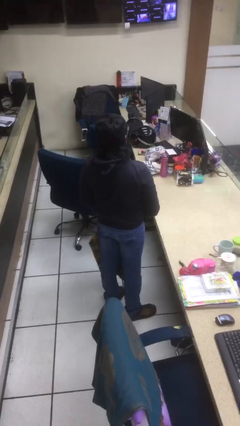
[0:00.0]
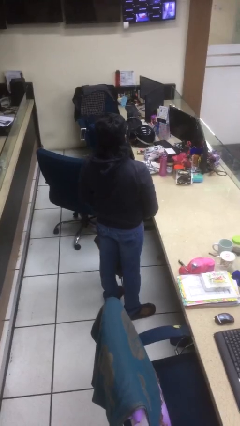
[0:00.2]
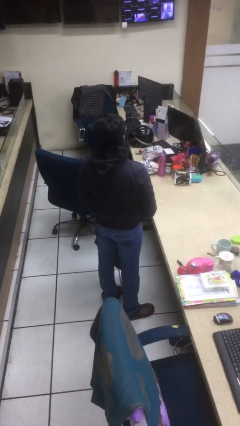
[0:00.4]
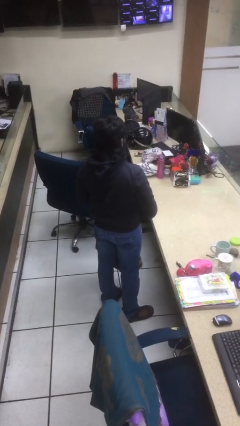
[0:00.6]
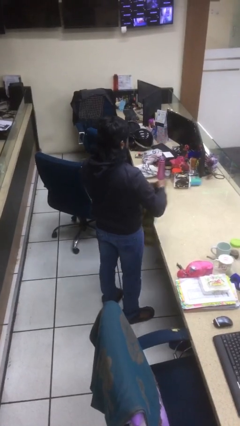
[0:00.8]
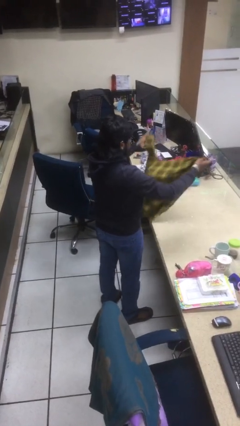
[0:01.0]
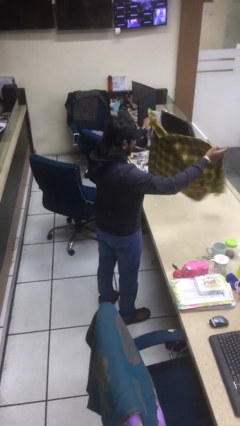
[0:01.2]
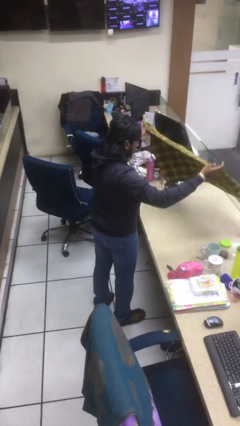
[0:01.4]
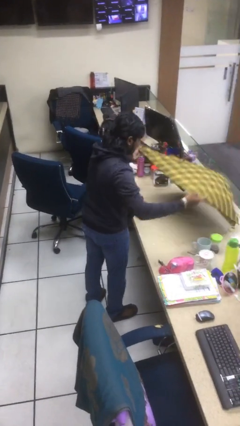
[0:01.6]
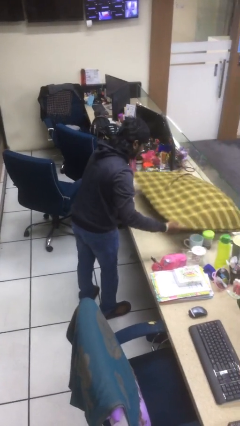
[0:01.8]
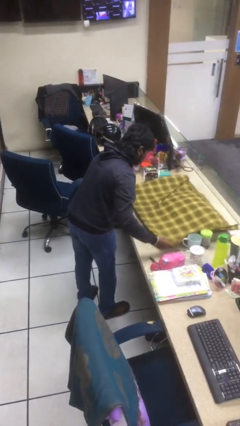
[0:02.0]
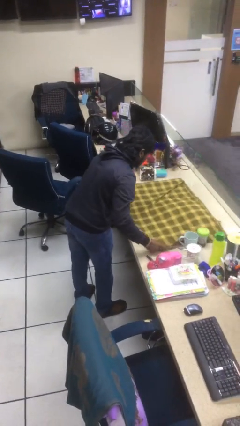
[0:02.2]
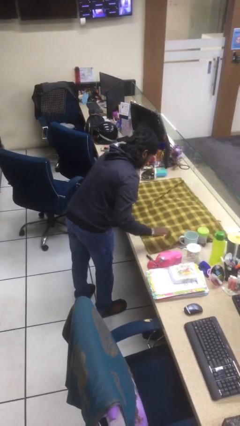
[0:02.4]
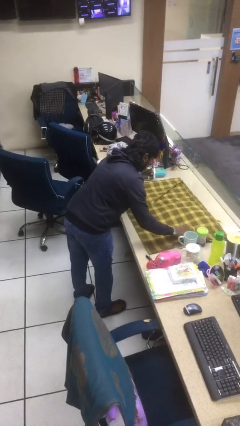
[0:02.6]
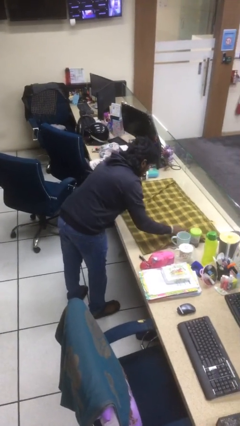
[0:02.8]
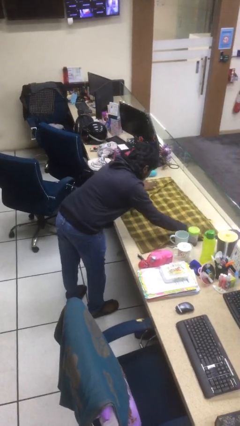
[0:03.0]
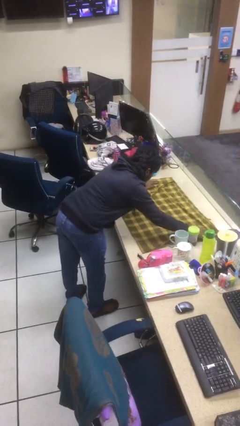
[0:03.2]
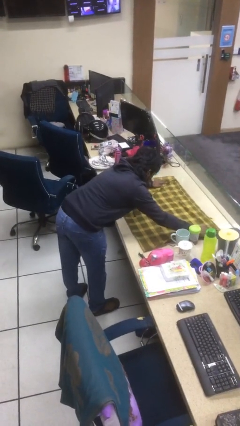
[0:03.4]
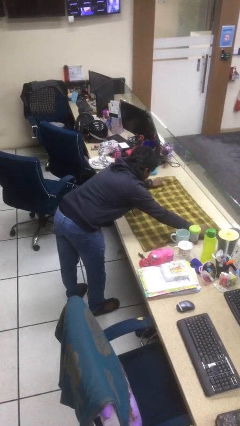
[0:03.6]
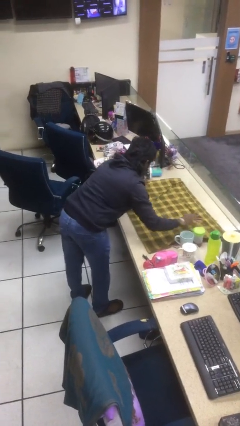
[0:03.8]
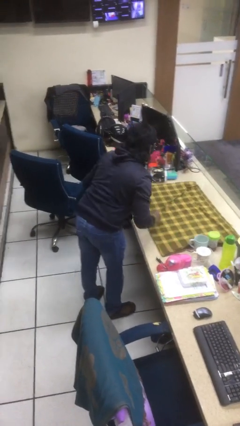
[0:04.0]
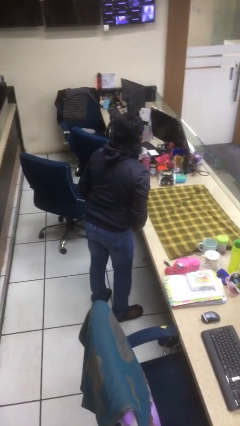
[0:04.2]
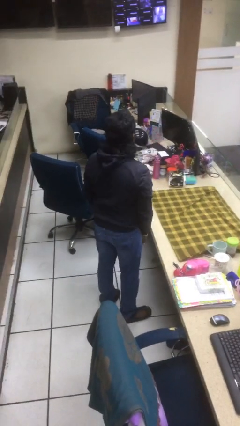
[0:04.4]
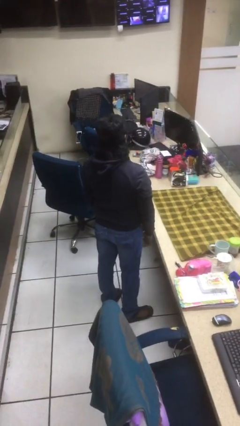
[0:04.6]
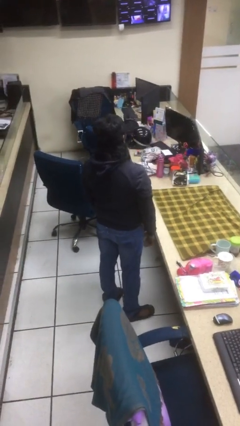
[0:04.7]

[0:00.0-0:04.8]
person spreads tablecloth

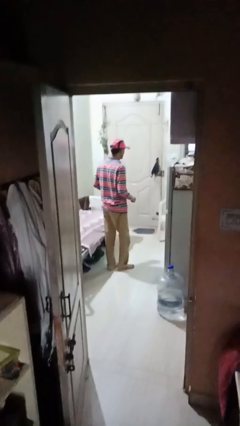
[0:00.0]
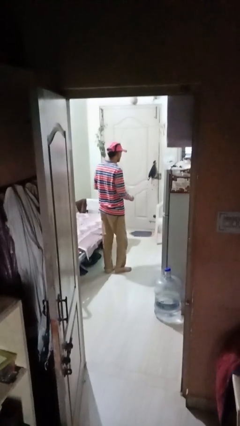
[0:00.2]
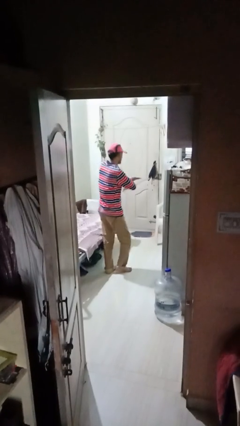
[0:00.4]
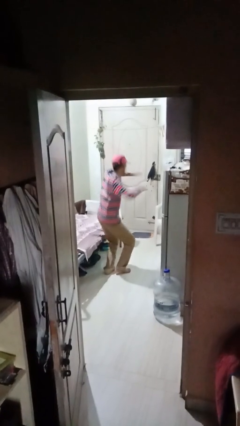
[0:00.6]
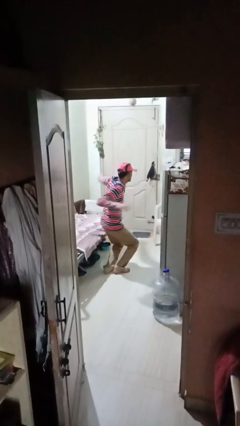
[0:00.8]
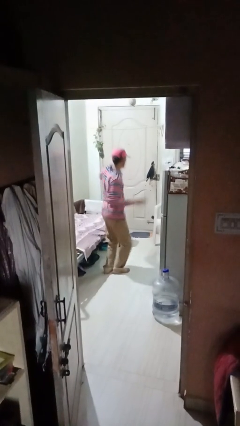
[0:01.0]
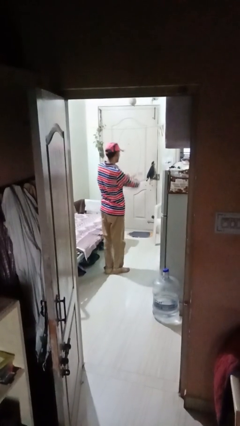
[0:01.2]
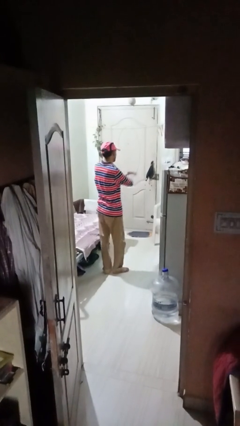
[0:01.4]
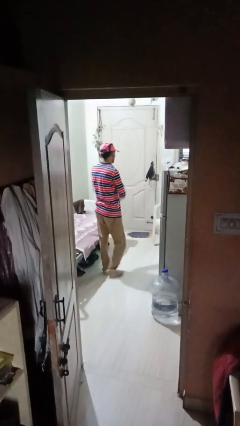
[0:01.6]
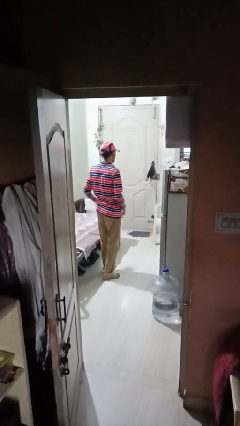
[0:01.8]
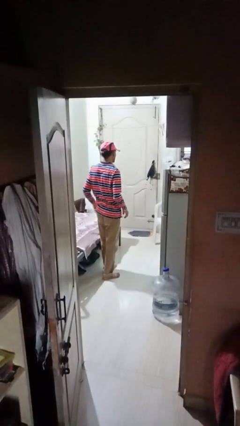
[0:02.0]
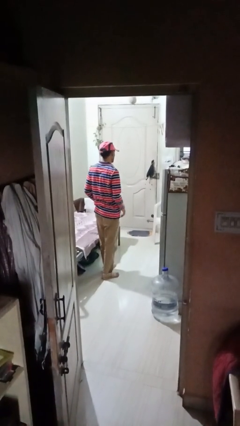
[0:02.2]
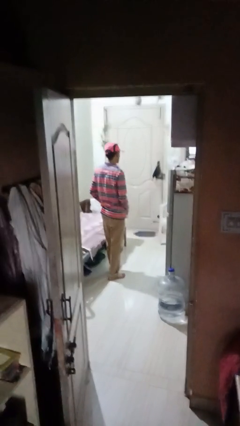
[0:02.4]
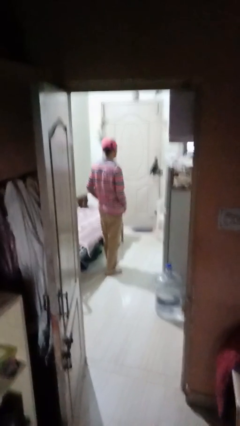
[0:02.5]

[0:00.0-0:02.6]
person karate chop

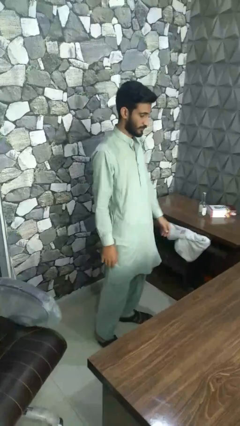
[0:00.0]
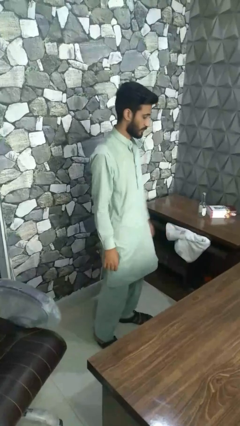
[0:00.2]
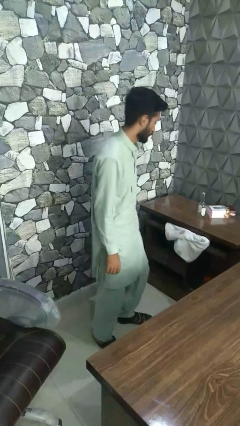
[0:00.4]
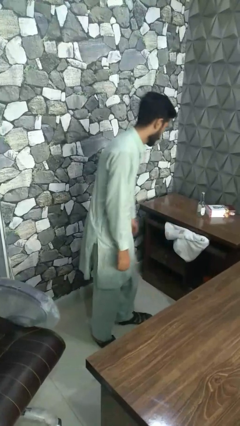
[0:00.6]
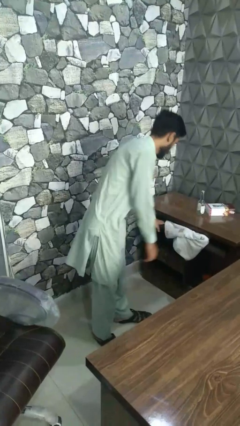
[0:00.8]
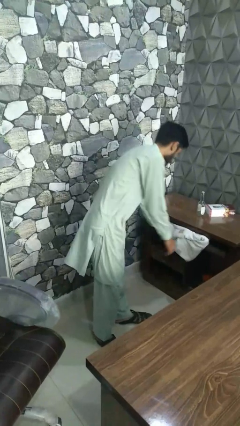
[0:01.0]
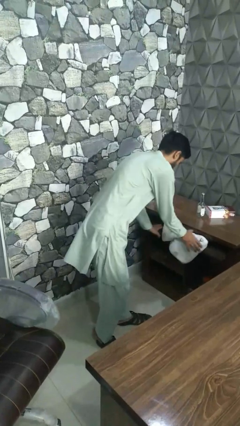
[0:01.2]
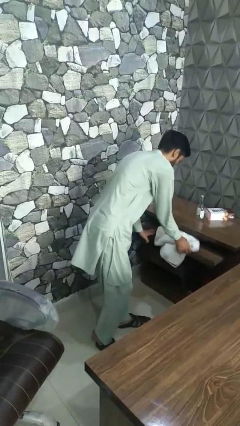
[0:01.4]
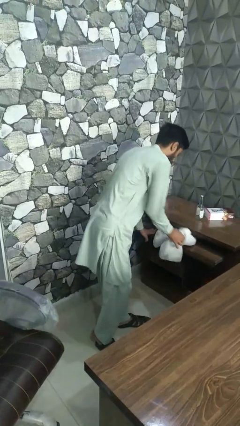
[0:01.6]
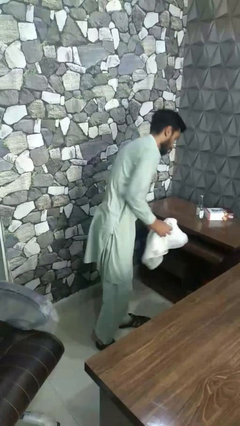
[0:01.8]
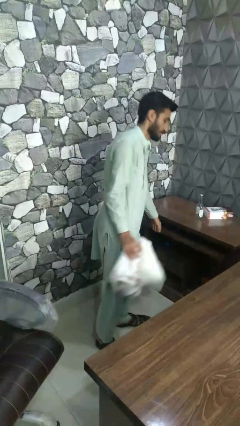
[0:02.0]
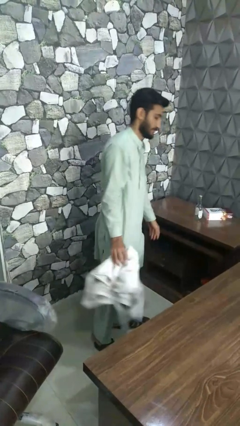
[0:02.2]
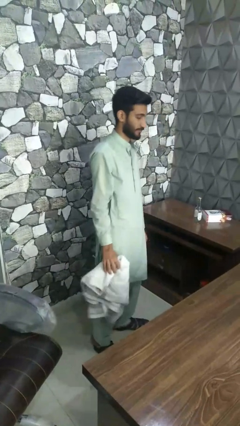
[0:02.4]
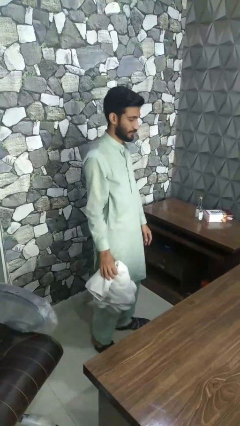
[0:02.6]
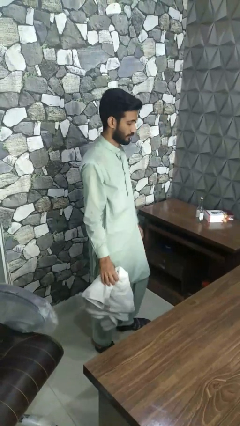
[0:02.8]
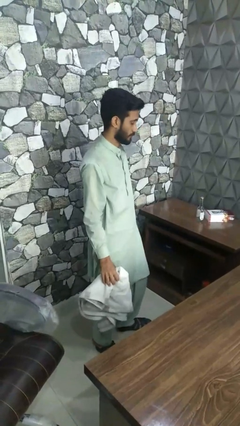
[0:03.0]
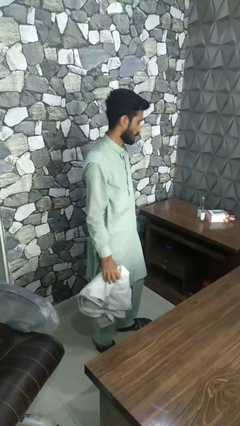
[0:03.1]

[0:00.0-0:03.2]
person takes clothes from dresser

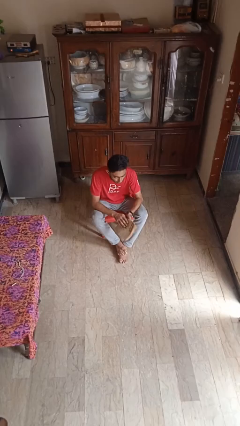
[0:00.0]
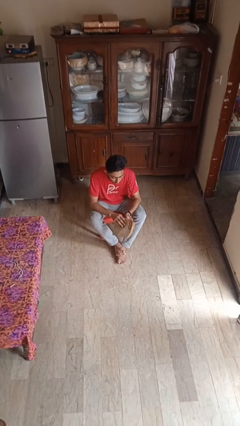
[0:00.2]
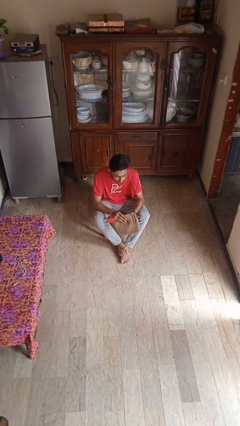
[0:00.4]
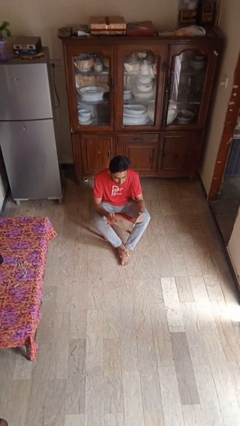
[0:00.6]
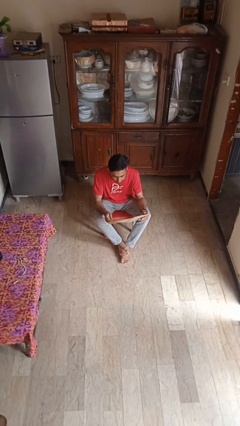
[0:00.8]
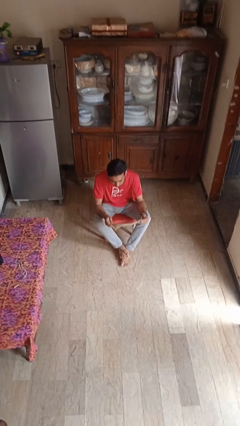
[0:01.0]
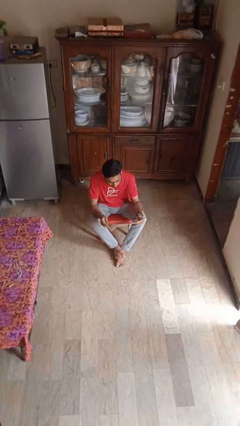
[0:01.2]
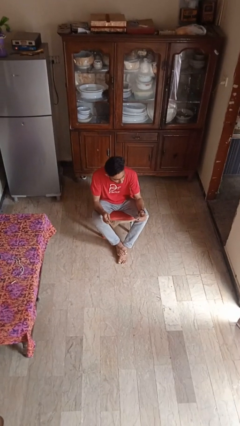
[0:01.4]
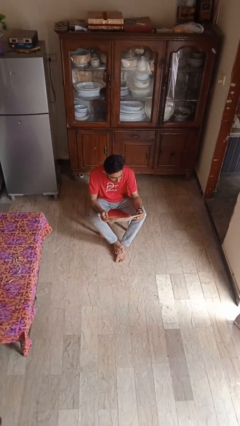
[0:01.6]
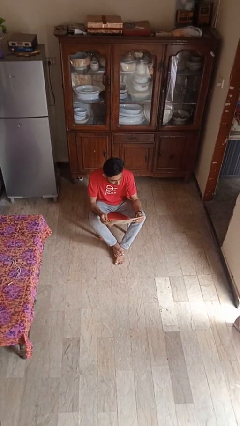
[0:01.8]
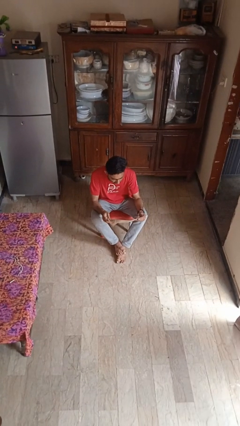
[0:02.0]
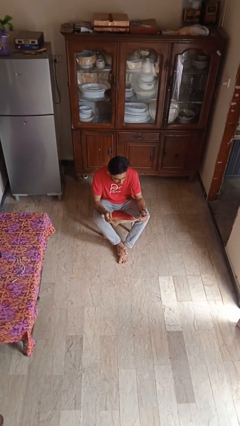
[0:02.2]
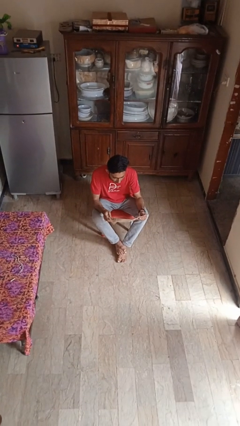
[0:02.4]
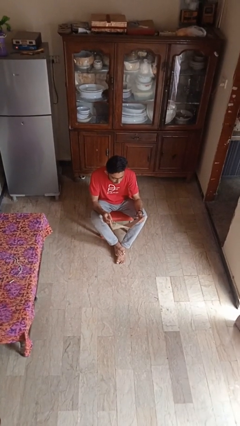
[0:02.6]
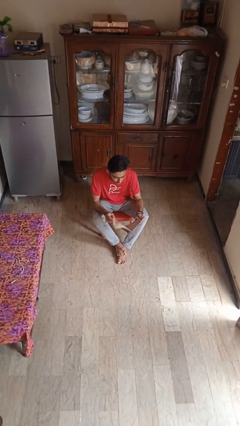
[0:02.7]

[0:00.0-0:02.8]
person reads newspaper

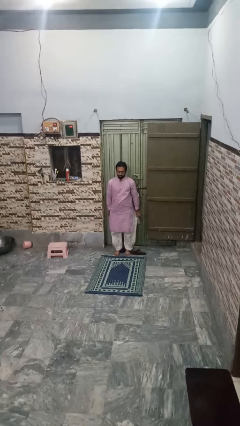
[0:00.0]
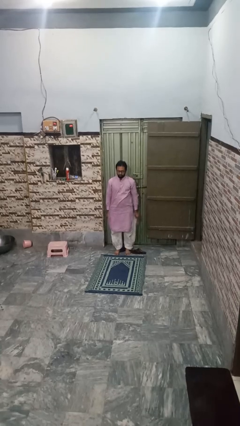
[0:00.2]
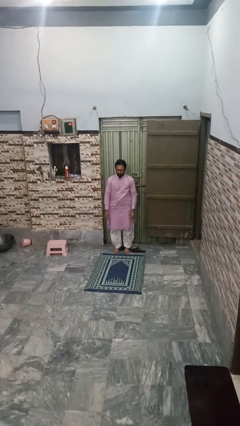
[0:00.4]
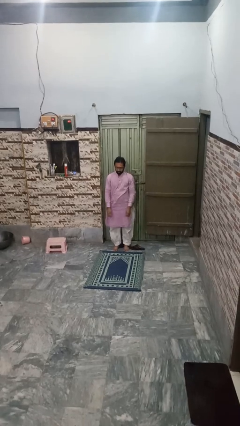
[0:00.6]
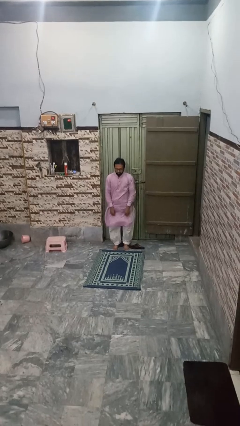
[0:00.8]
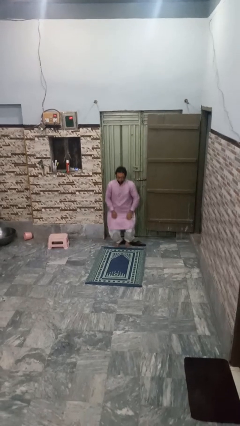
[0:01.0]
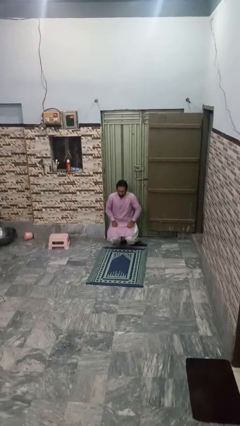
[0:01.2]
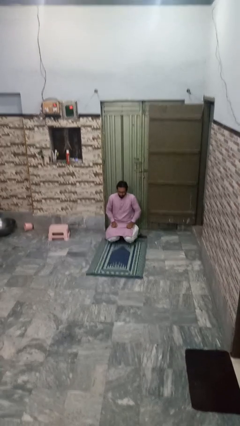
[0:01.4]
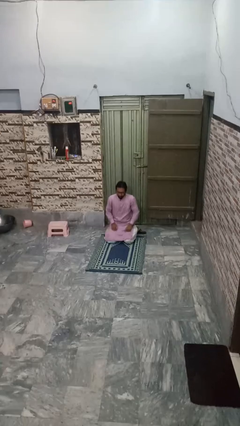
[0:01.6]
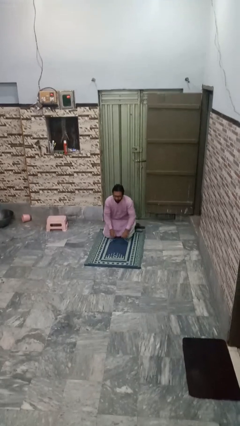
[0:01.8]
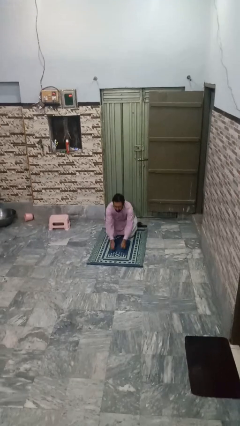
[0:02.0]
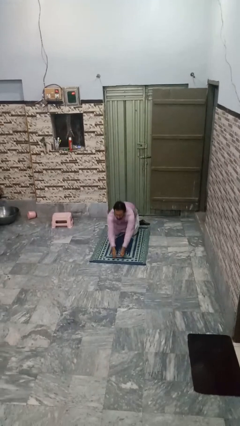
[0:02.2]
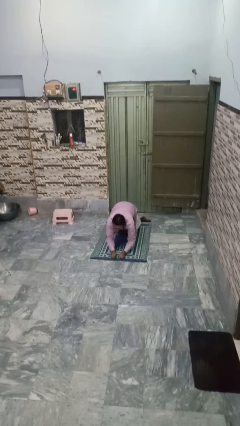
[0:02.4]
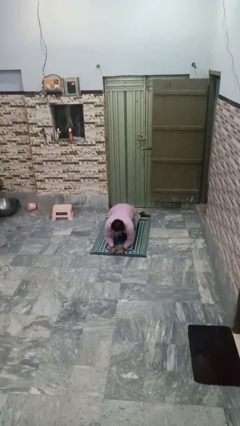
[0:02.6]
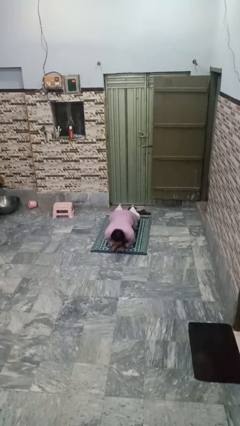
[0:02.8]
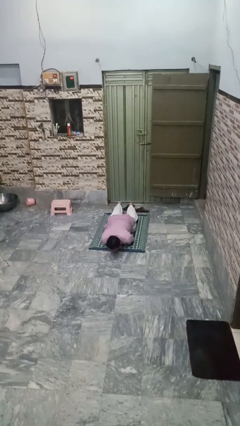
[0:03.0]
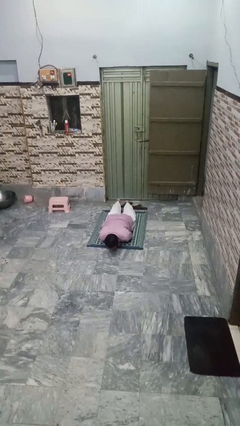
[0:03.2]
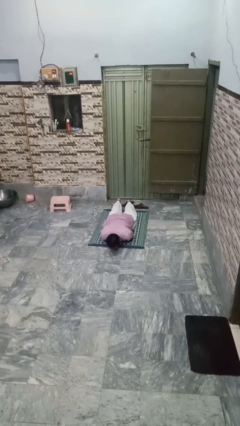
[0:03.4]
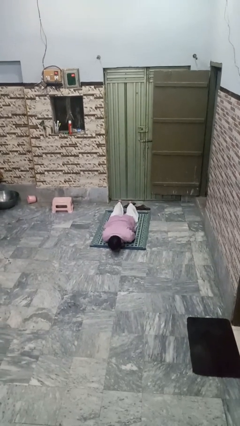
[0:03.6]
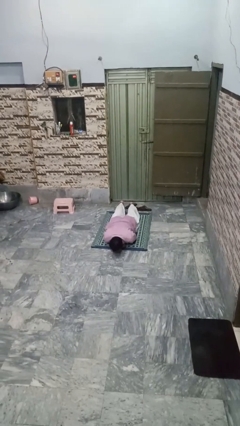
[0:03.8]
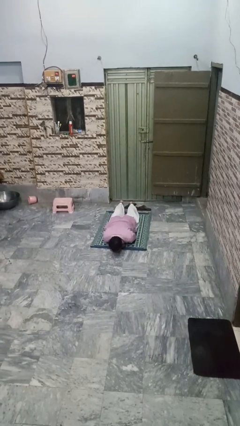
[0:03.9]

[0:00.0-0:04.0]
person exercises with plank
